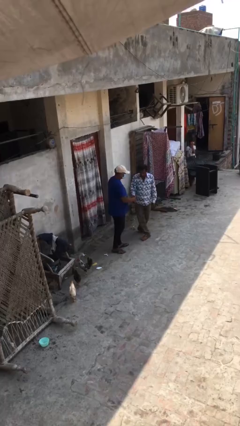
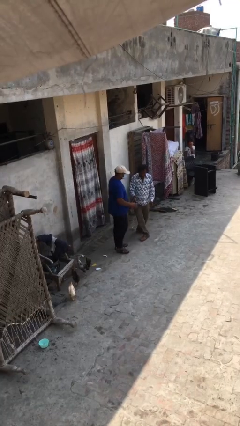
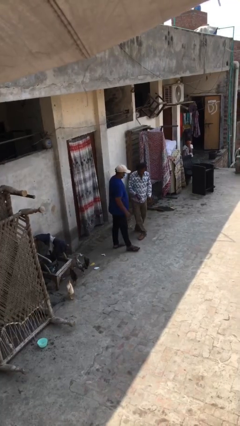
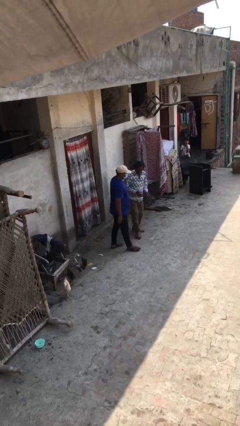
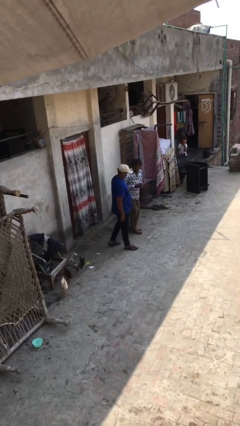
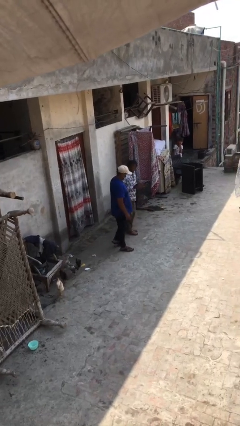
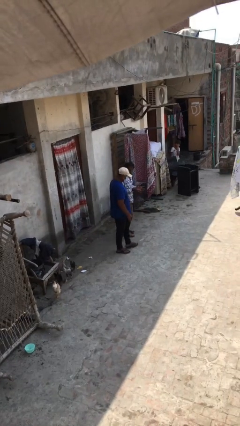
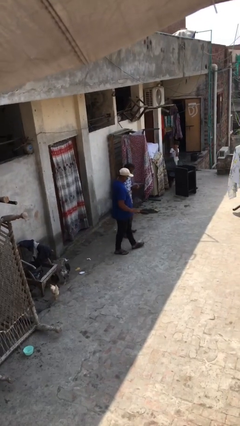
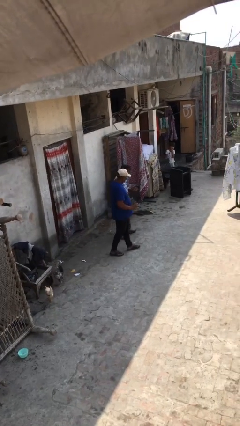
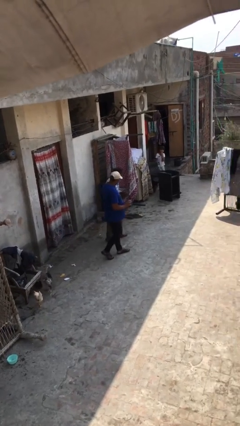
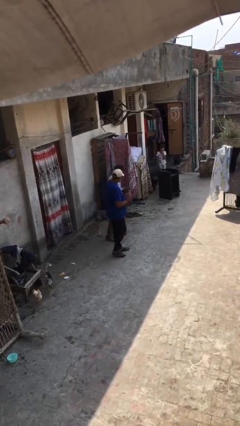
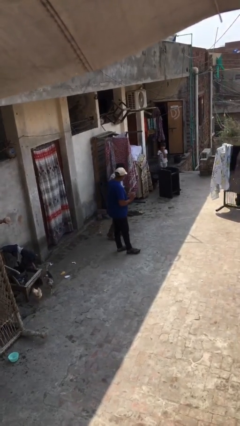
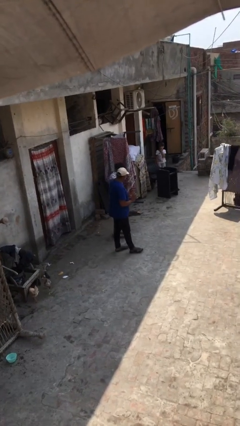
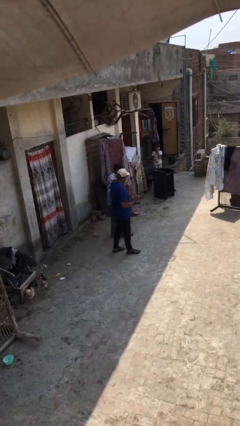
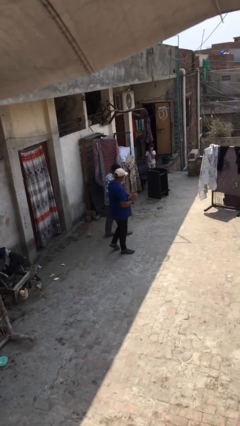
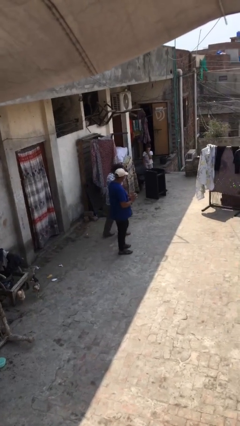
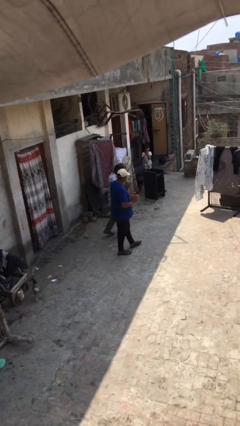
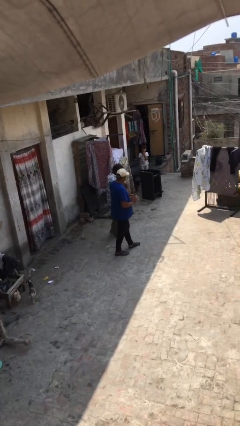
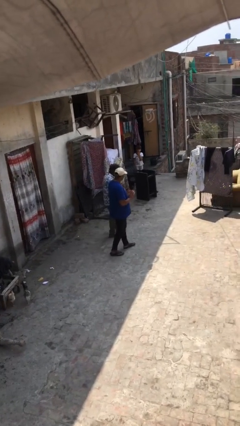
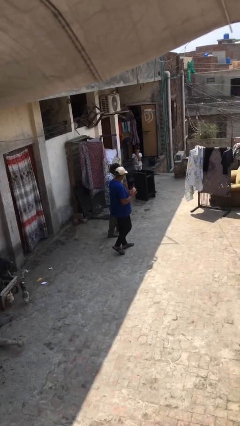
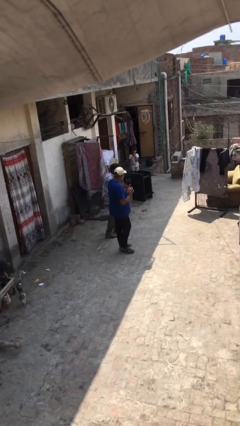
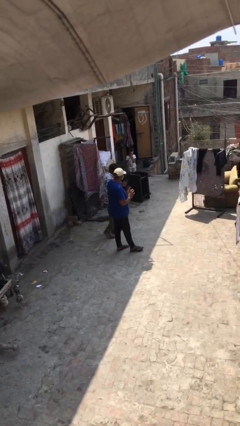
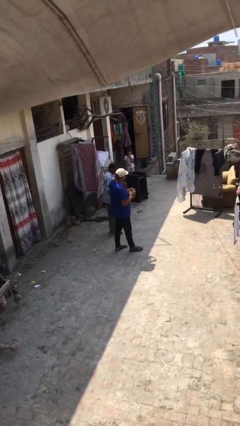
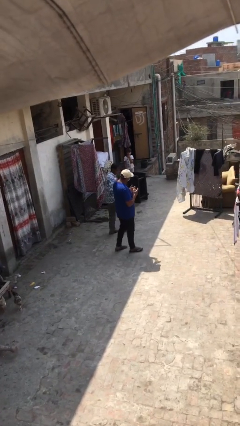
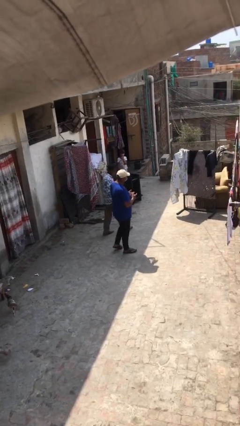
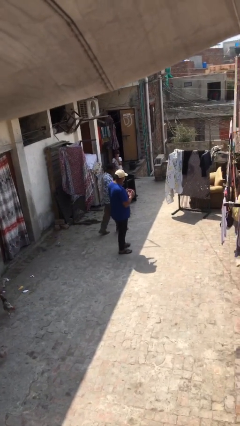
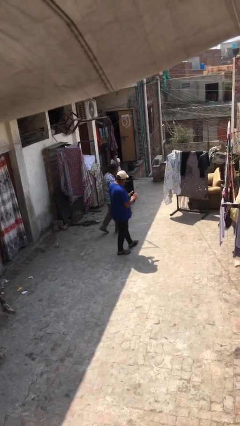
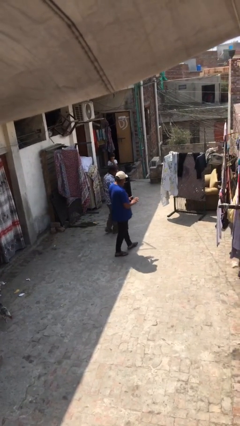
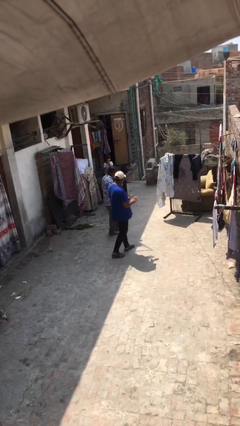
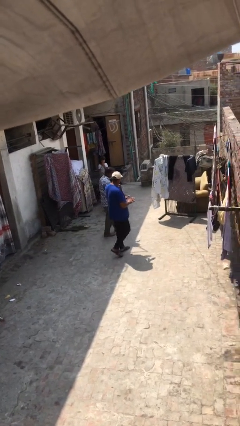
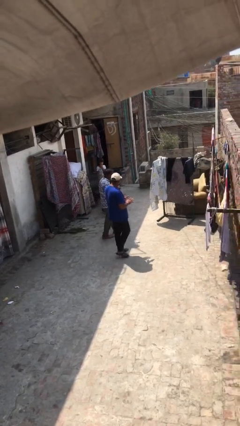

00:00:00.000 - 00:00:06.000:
person talks to person

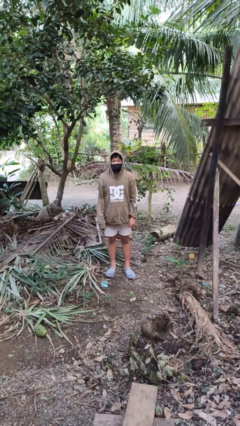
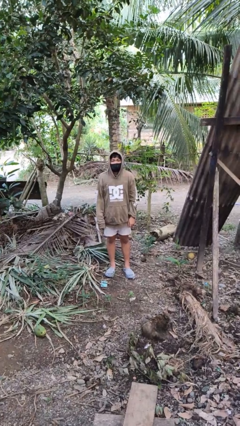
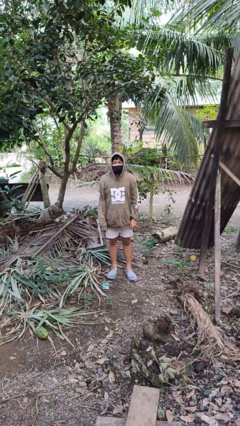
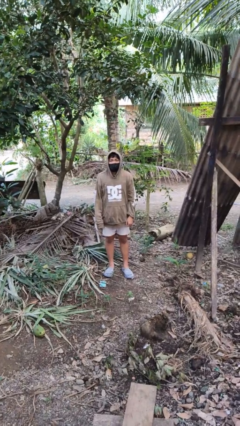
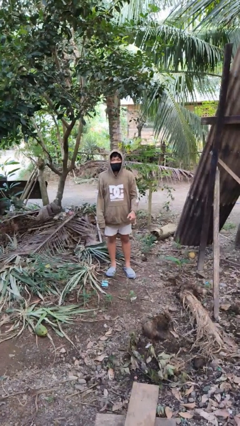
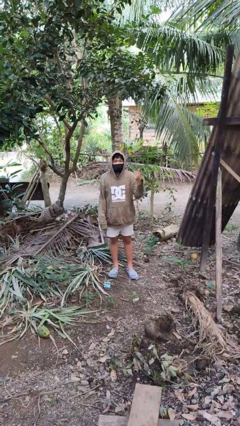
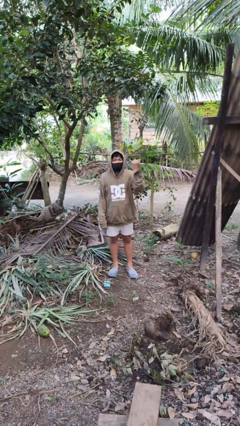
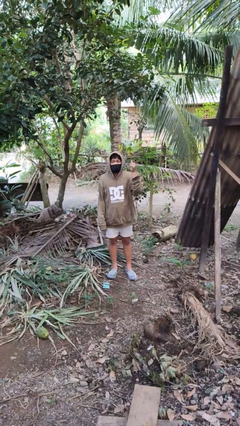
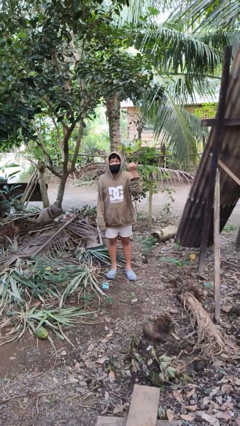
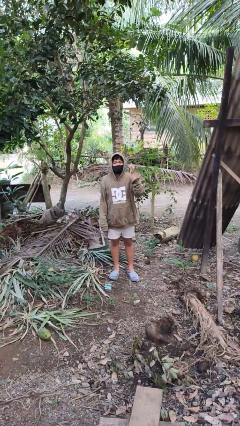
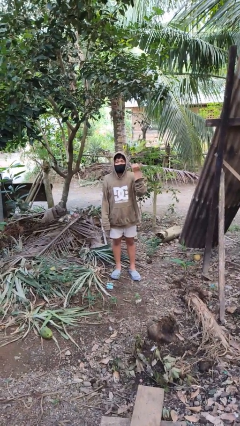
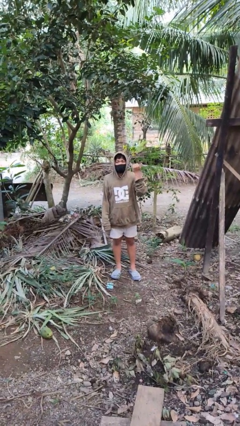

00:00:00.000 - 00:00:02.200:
person gestures hang loose

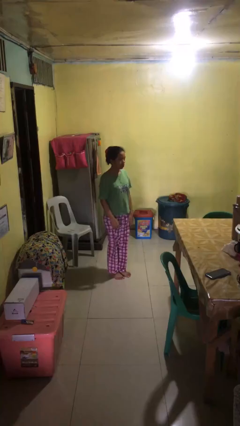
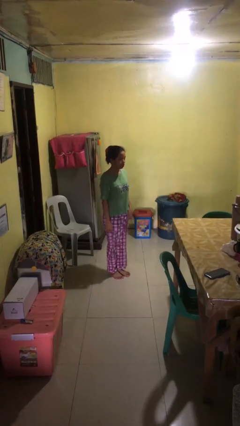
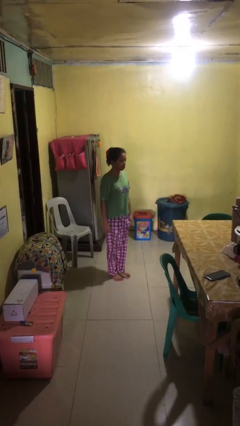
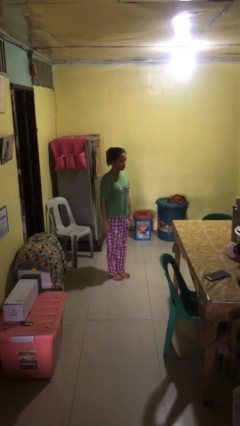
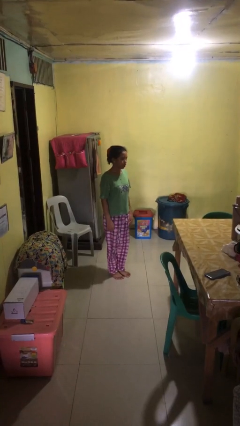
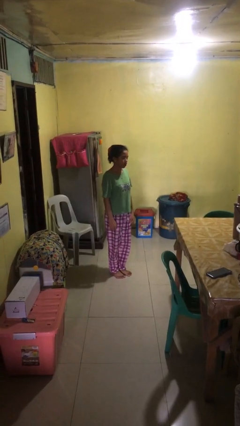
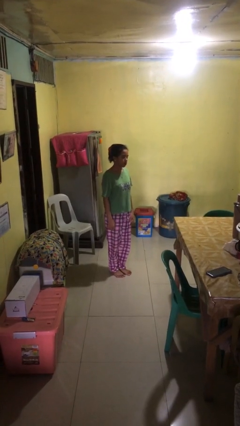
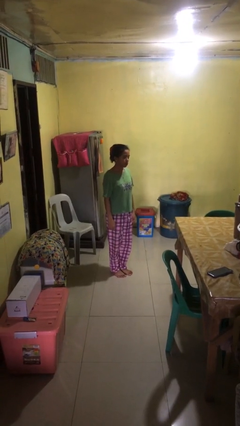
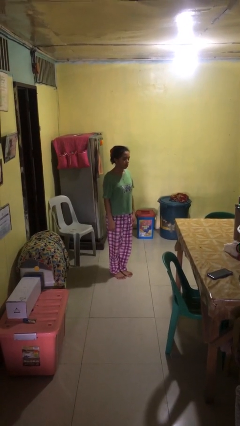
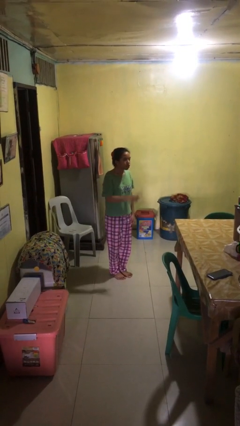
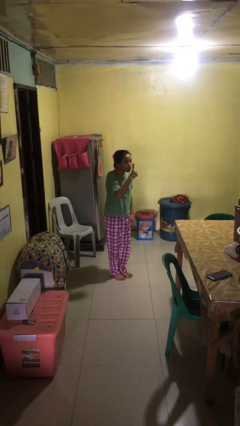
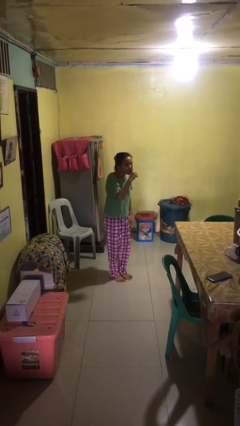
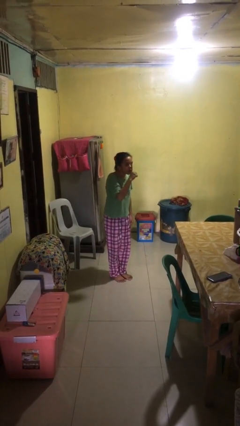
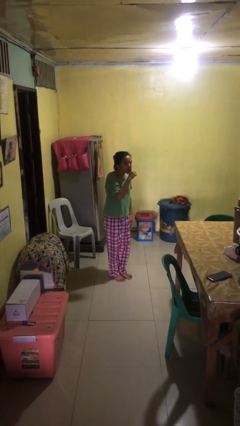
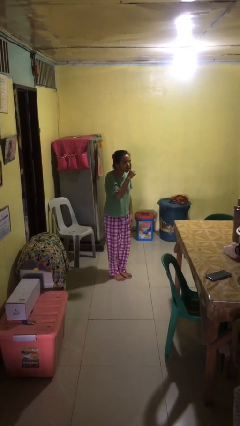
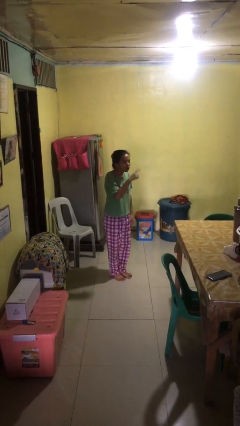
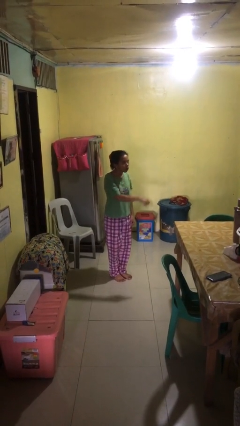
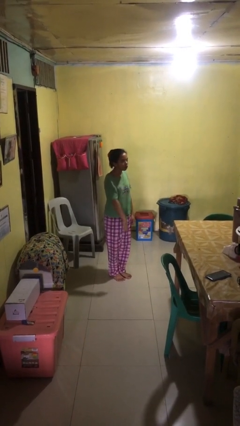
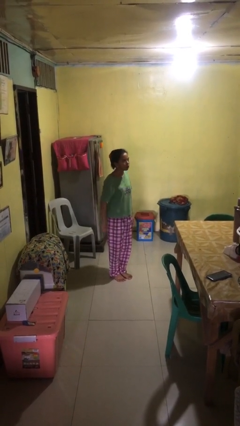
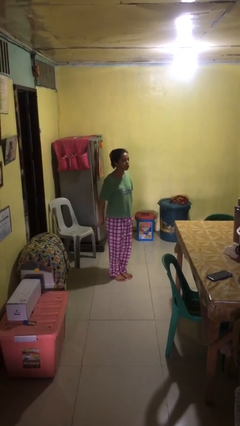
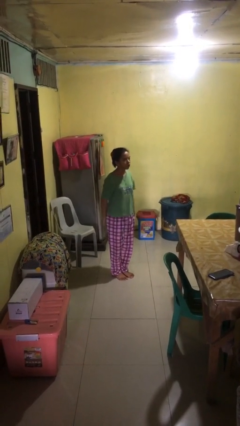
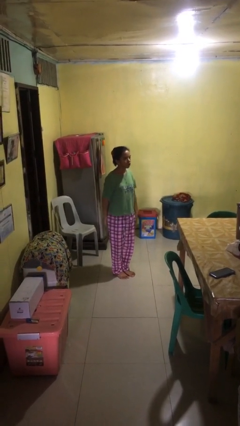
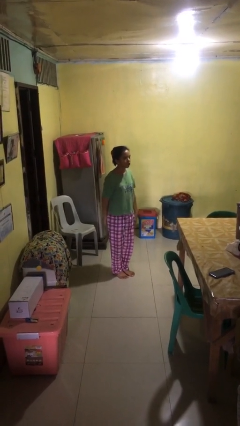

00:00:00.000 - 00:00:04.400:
person gestures be quiet

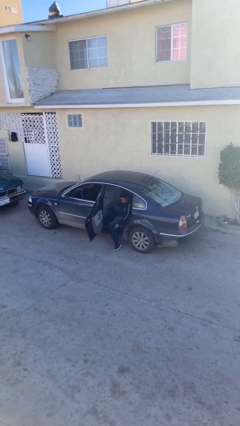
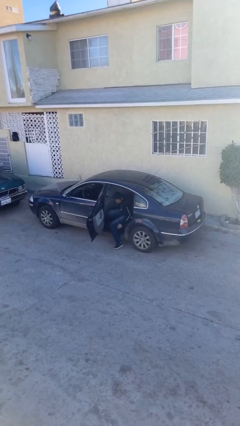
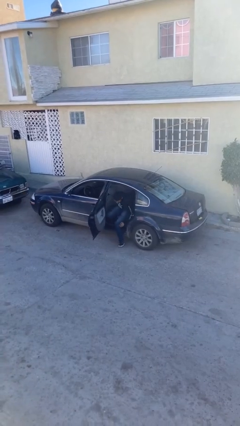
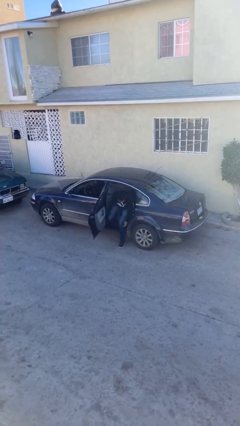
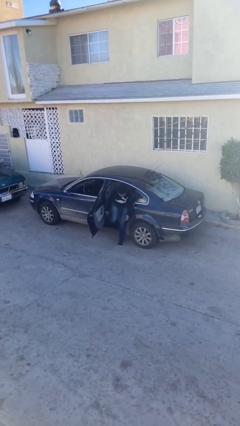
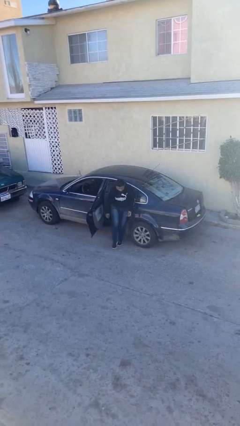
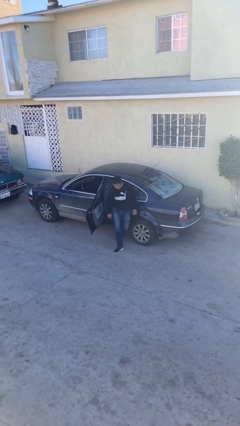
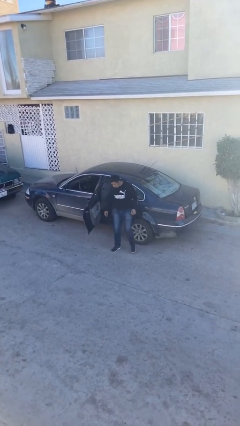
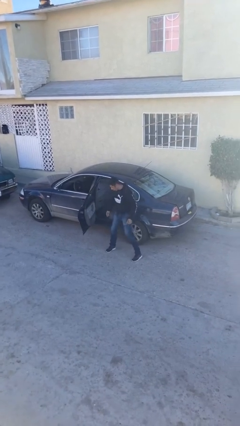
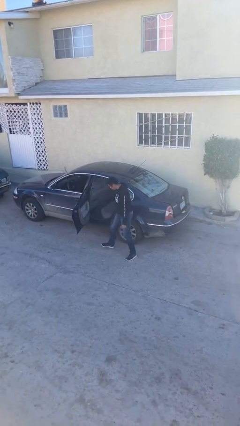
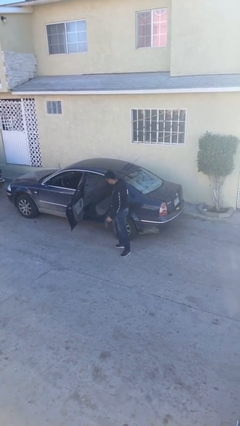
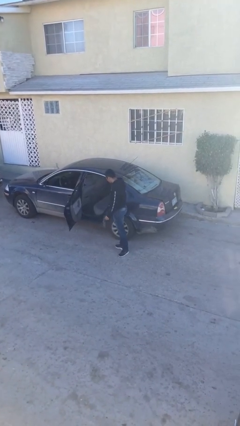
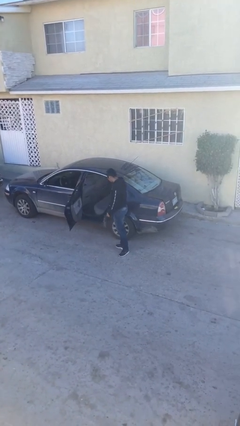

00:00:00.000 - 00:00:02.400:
person exits car

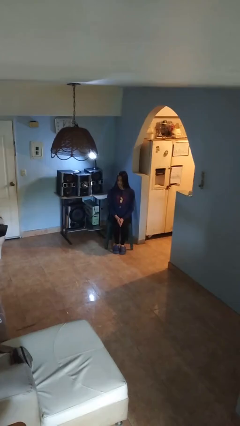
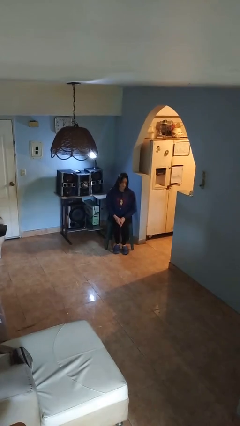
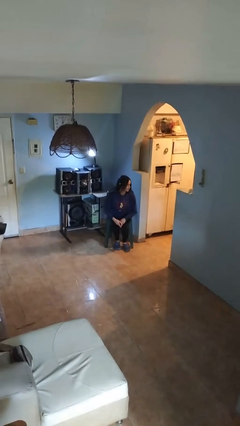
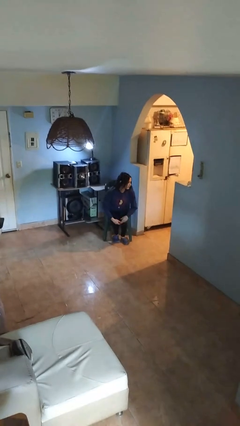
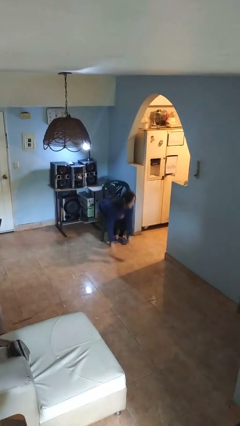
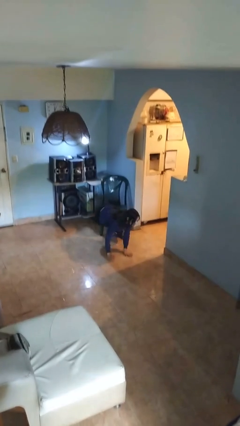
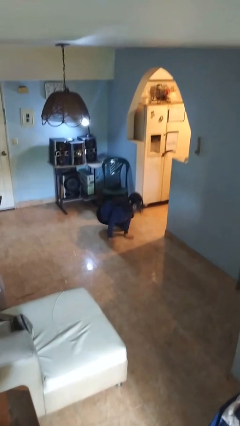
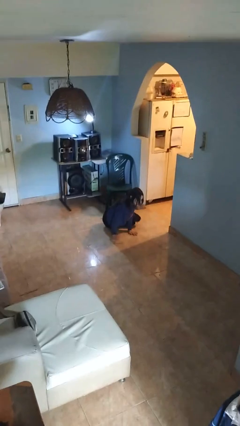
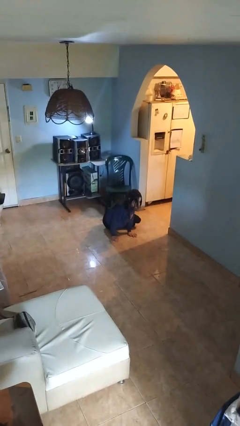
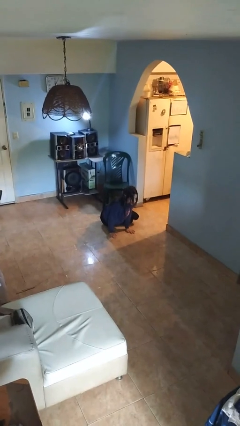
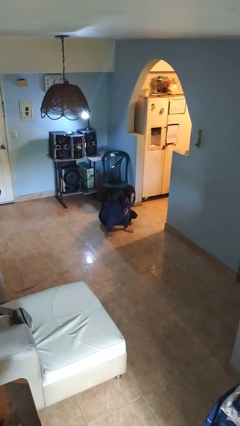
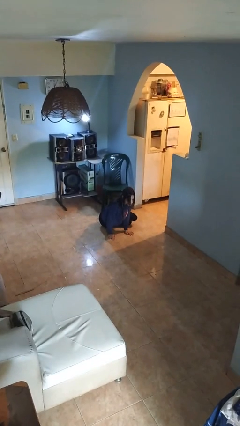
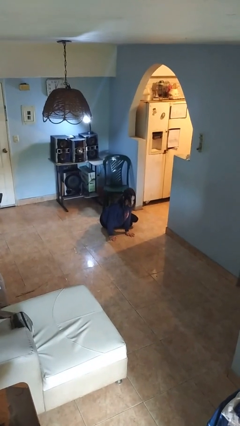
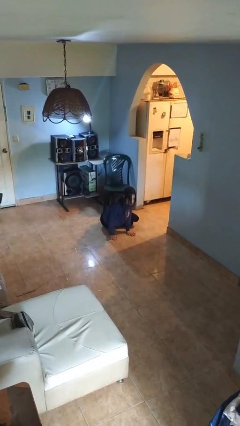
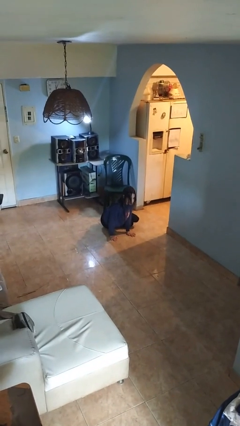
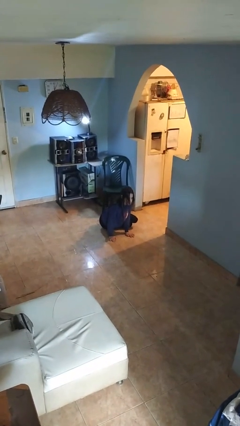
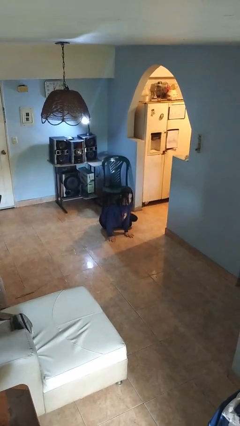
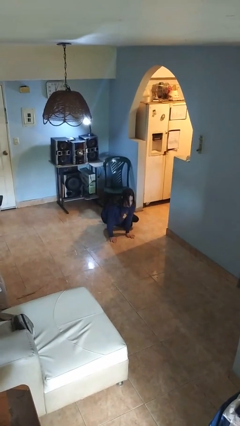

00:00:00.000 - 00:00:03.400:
person falls from chair
